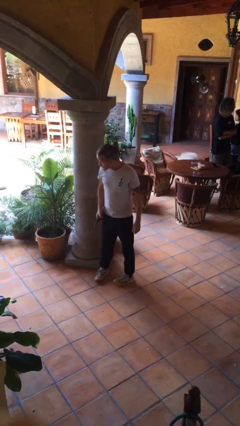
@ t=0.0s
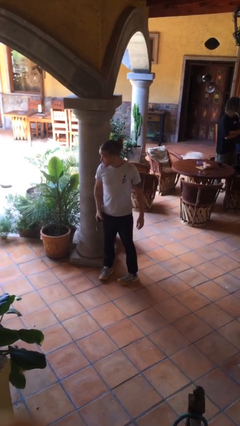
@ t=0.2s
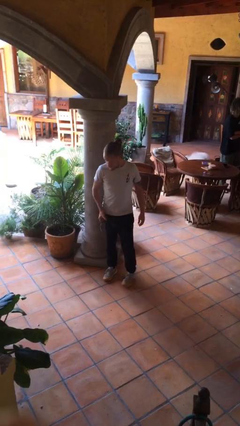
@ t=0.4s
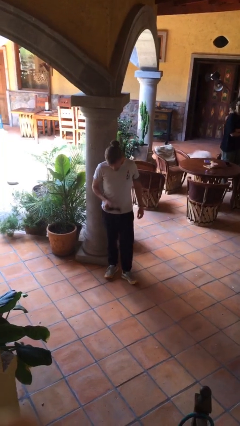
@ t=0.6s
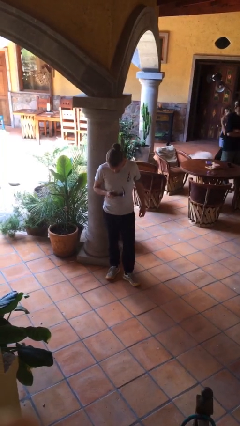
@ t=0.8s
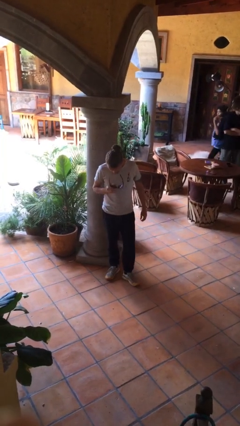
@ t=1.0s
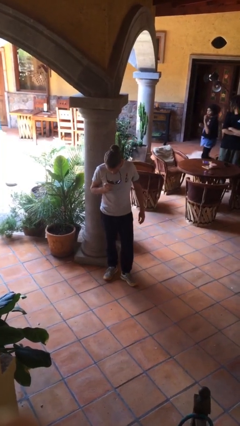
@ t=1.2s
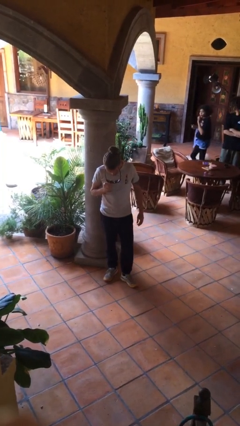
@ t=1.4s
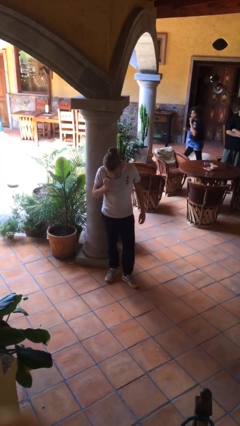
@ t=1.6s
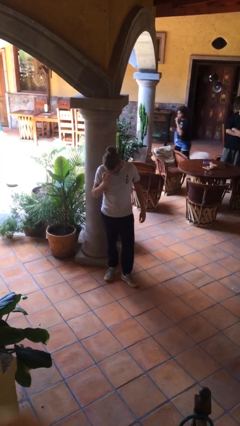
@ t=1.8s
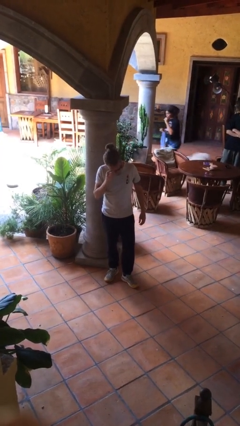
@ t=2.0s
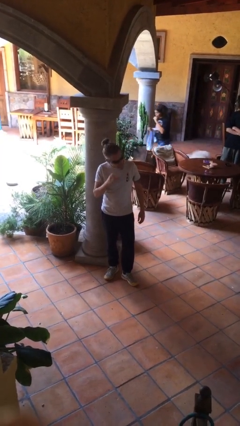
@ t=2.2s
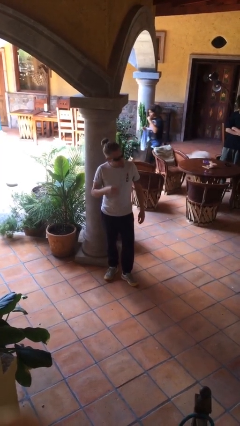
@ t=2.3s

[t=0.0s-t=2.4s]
person puts on sunglasses

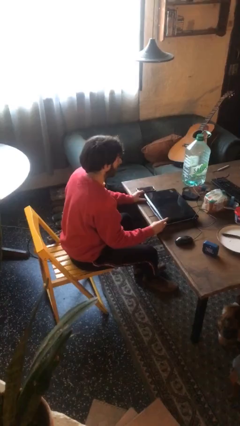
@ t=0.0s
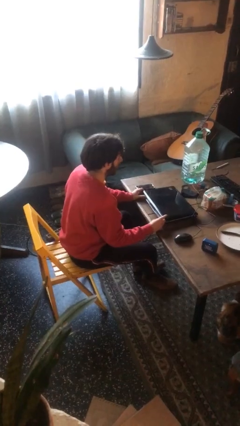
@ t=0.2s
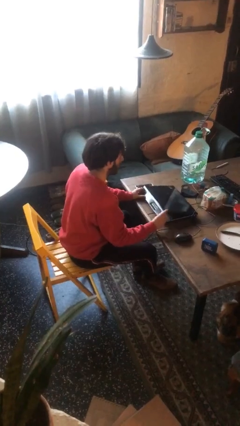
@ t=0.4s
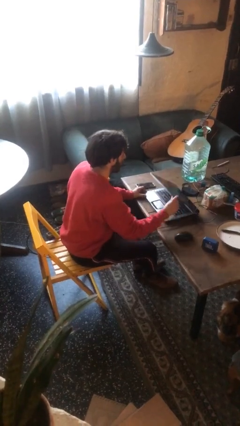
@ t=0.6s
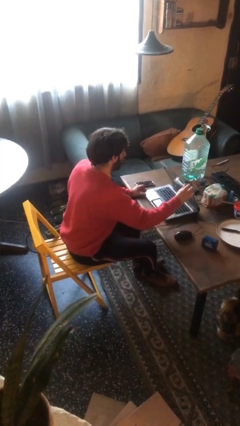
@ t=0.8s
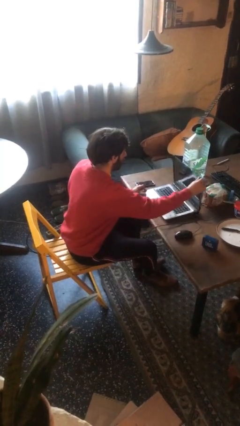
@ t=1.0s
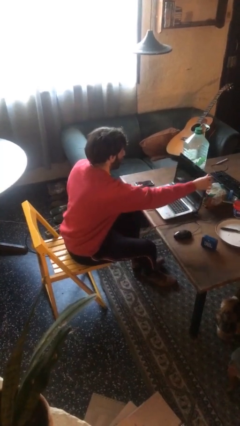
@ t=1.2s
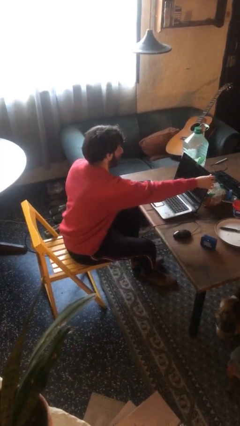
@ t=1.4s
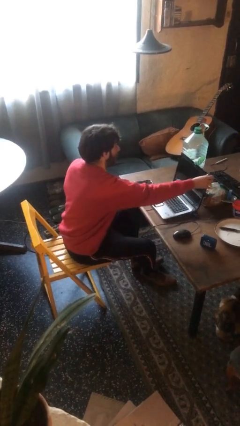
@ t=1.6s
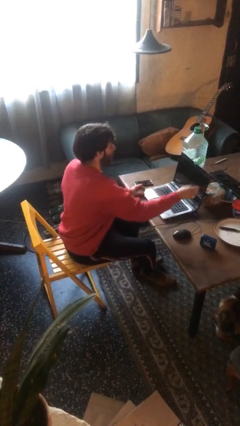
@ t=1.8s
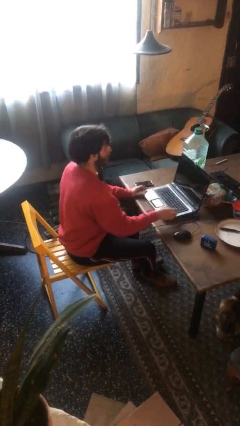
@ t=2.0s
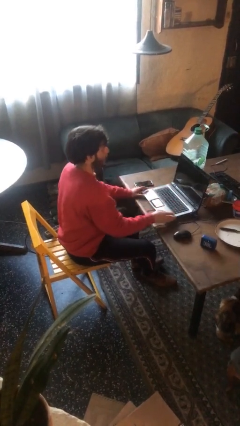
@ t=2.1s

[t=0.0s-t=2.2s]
person opens laptop

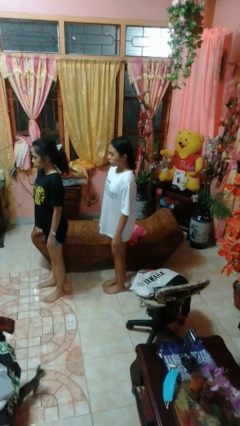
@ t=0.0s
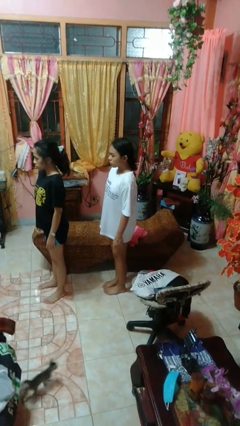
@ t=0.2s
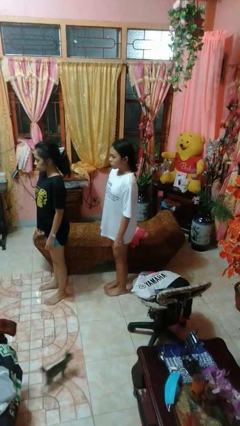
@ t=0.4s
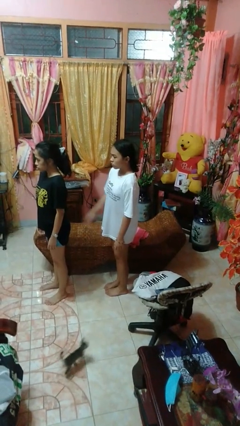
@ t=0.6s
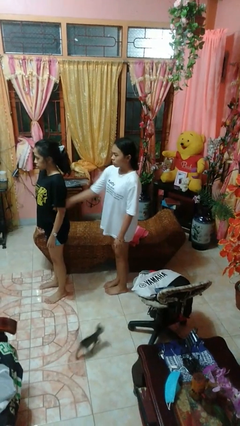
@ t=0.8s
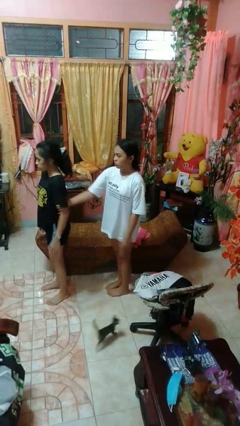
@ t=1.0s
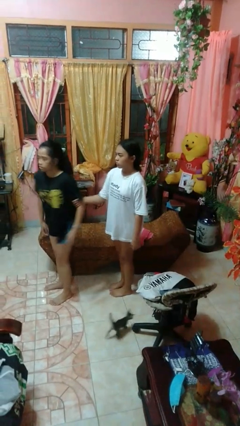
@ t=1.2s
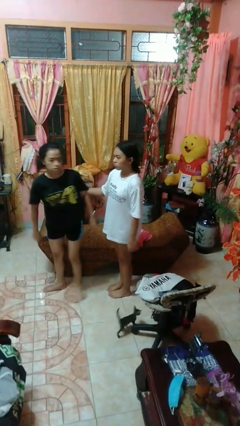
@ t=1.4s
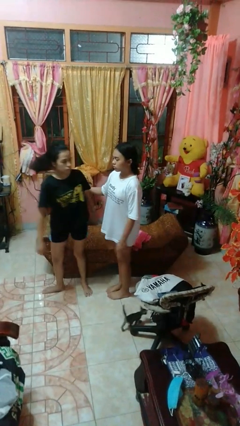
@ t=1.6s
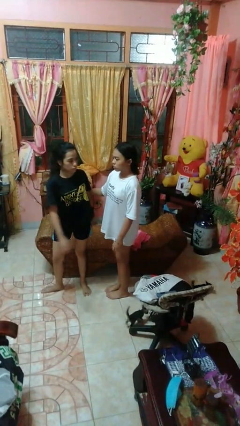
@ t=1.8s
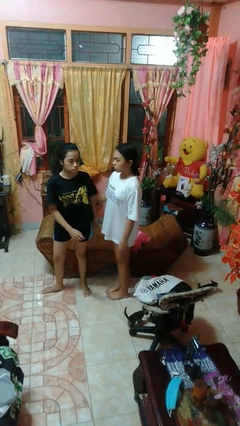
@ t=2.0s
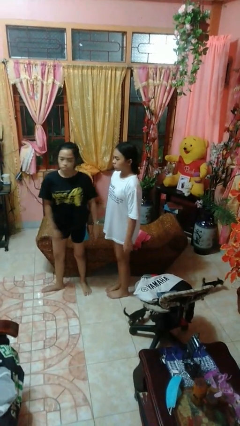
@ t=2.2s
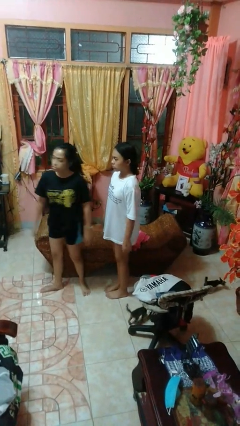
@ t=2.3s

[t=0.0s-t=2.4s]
person grabs person by bicep

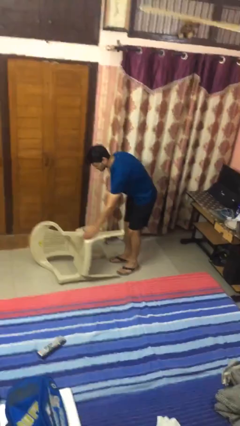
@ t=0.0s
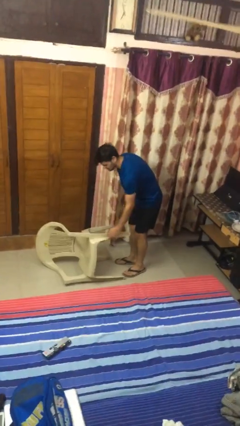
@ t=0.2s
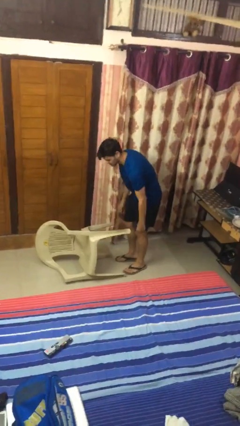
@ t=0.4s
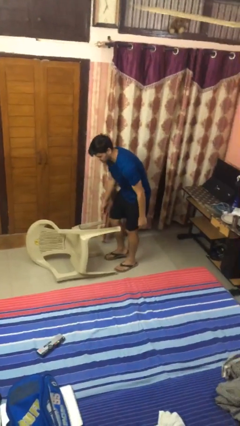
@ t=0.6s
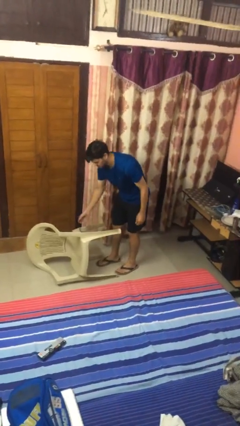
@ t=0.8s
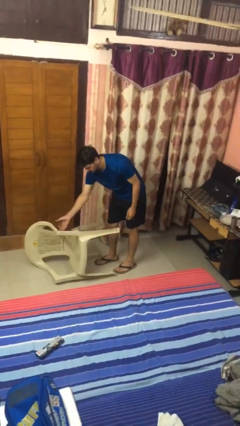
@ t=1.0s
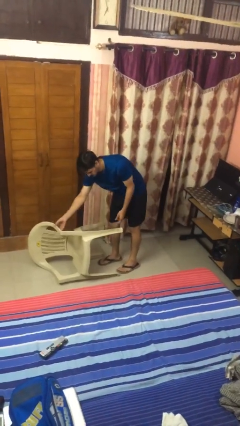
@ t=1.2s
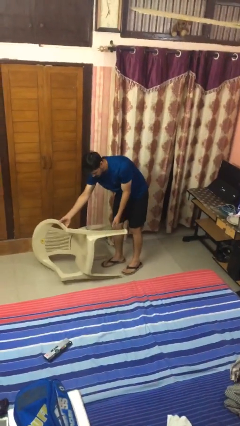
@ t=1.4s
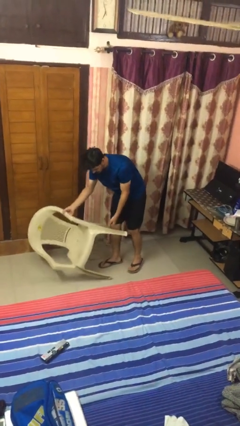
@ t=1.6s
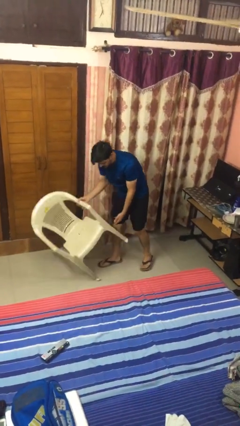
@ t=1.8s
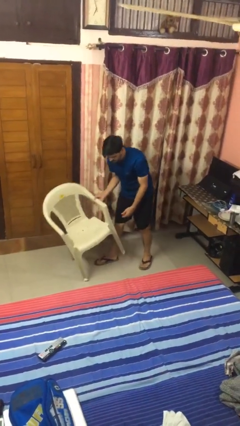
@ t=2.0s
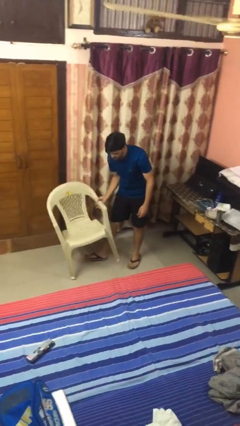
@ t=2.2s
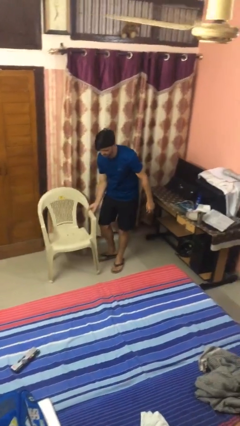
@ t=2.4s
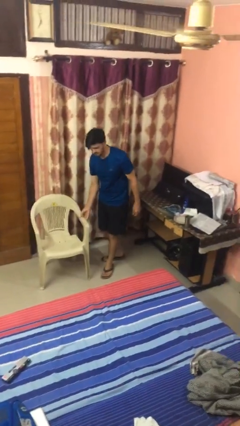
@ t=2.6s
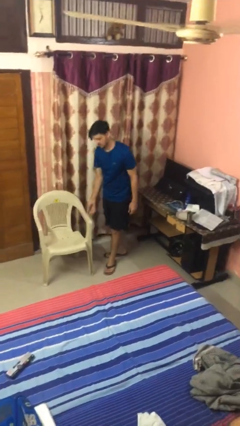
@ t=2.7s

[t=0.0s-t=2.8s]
person sets upright furniture

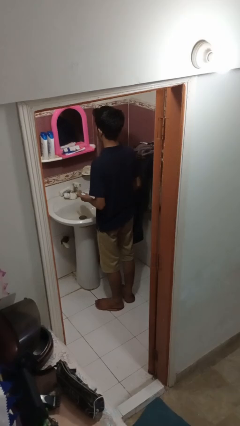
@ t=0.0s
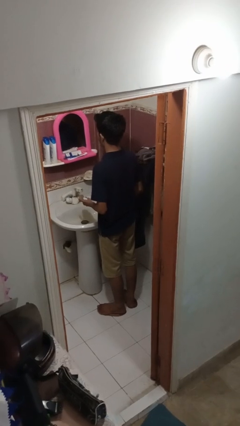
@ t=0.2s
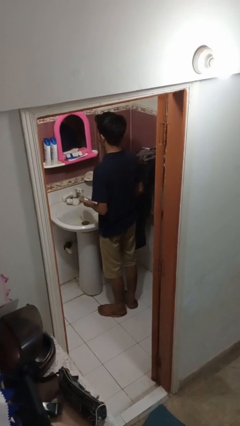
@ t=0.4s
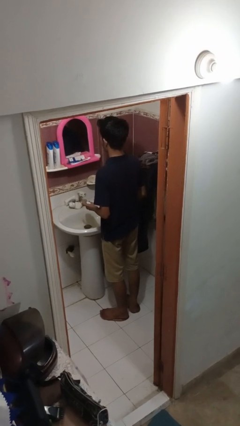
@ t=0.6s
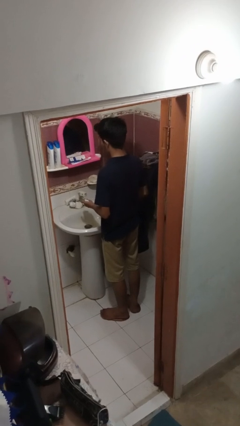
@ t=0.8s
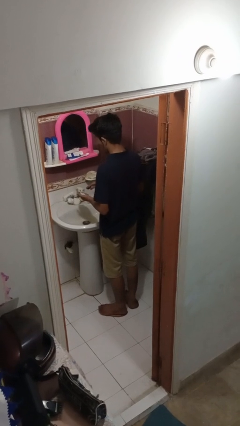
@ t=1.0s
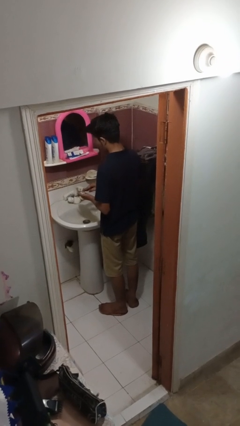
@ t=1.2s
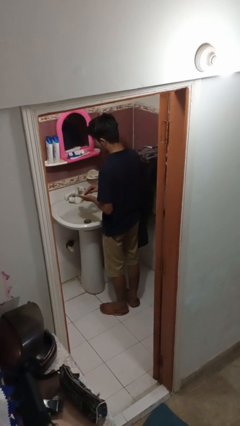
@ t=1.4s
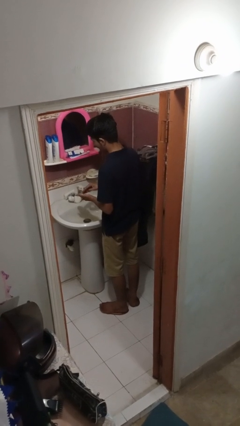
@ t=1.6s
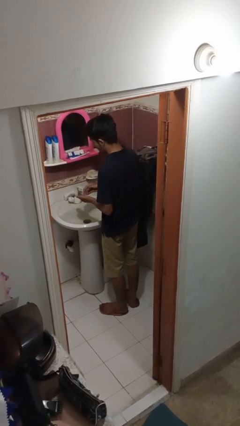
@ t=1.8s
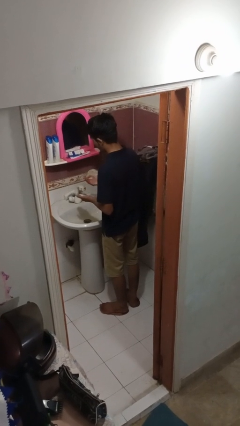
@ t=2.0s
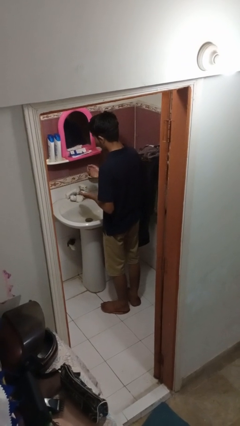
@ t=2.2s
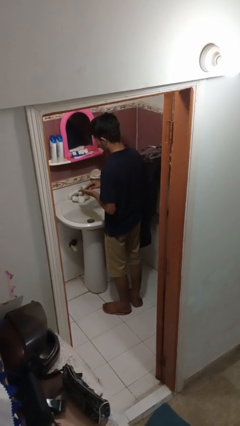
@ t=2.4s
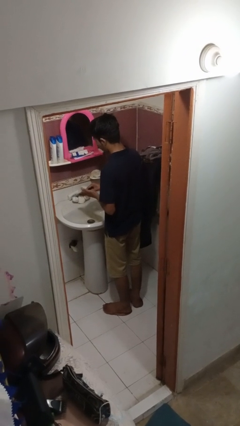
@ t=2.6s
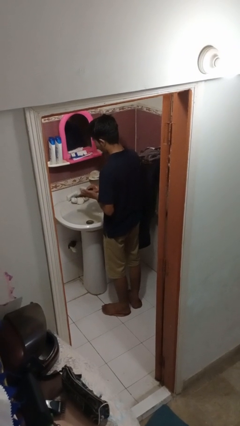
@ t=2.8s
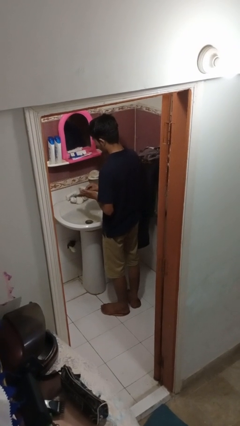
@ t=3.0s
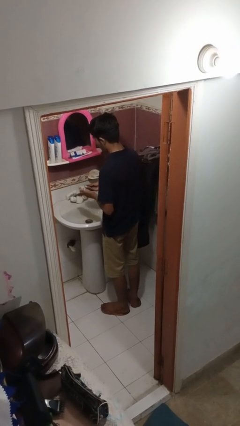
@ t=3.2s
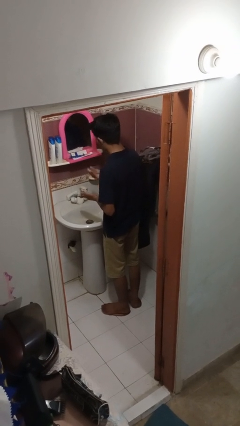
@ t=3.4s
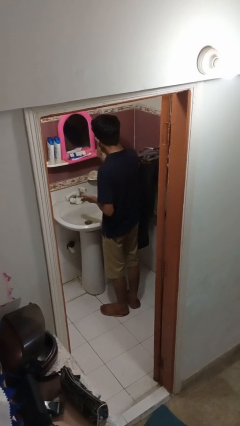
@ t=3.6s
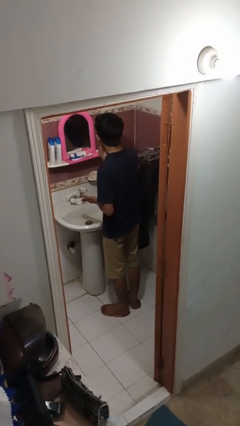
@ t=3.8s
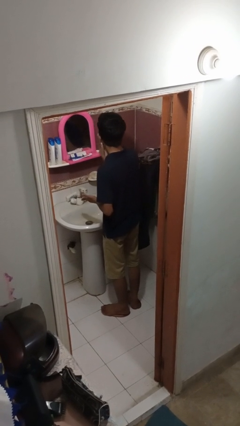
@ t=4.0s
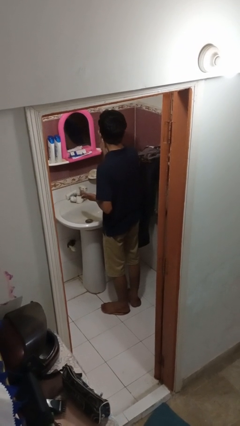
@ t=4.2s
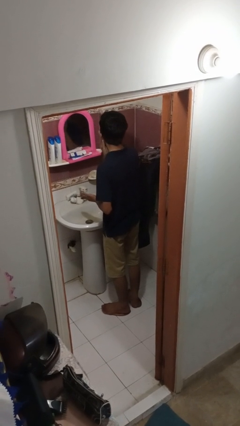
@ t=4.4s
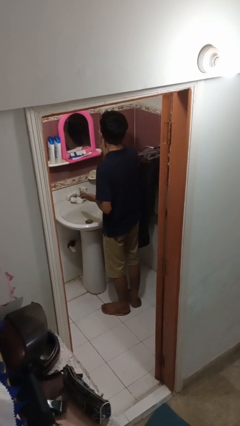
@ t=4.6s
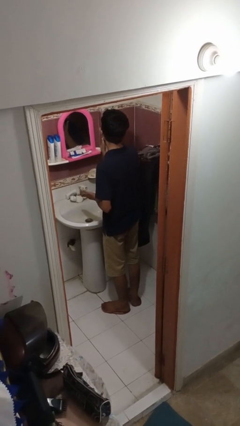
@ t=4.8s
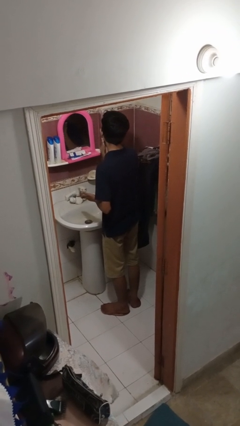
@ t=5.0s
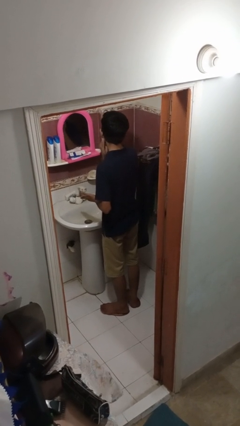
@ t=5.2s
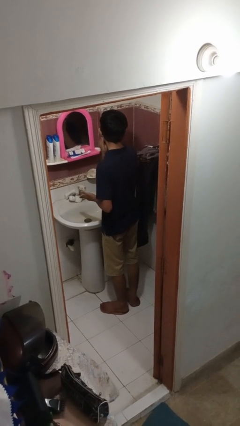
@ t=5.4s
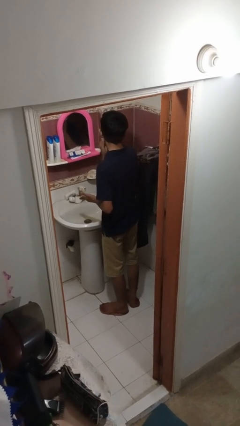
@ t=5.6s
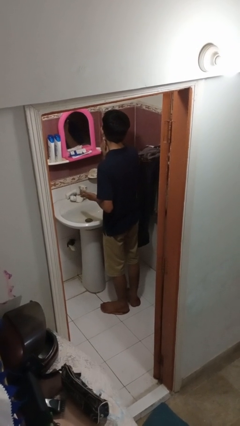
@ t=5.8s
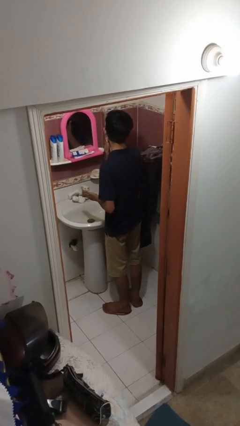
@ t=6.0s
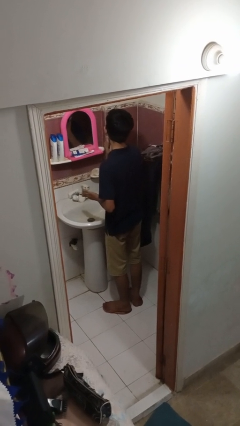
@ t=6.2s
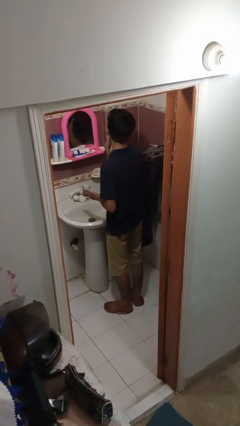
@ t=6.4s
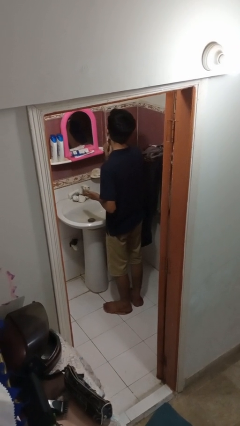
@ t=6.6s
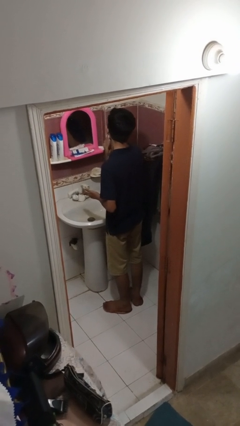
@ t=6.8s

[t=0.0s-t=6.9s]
person applies shaving cream

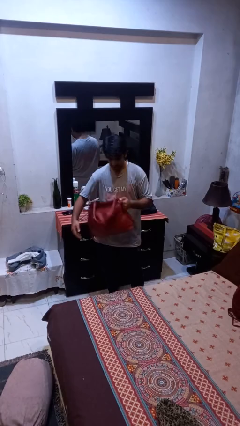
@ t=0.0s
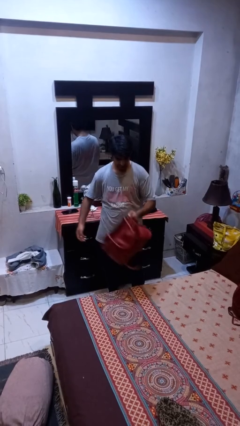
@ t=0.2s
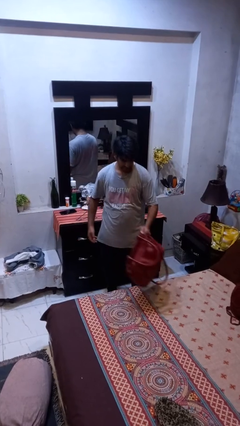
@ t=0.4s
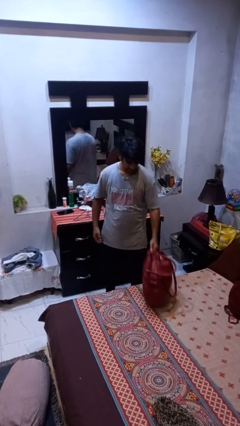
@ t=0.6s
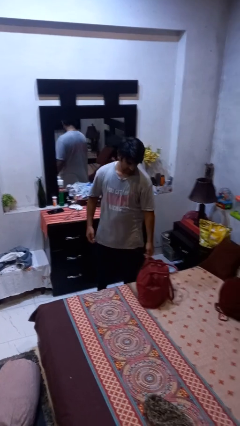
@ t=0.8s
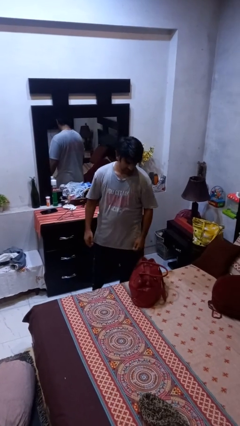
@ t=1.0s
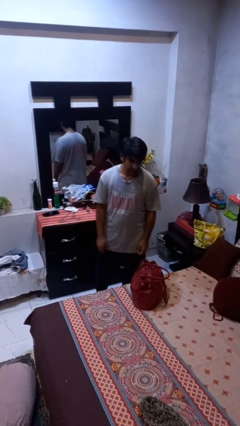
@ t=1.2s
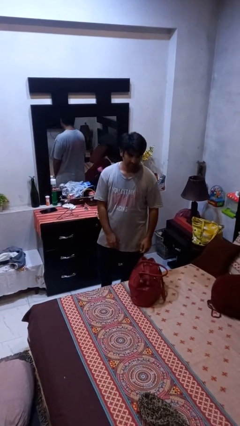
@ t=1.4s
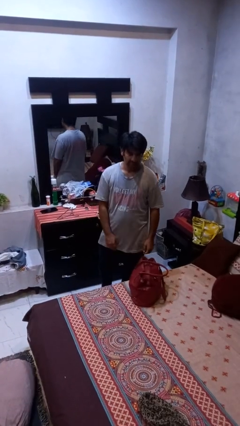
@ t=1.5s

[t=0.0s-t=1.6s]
person puts down object on bed
